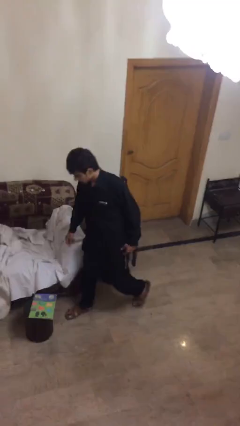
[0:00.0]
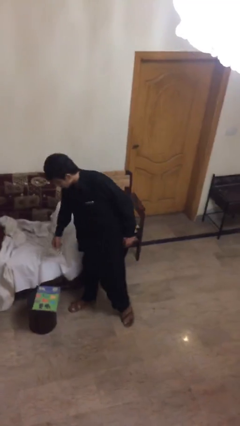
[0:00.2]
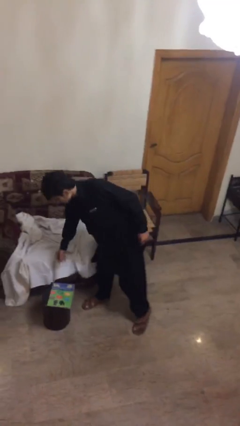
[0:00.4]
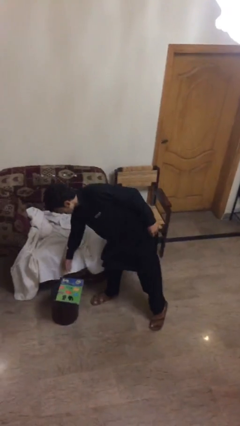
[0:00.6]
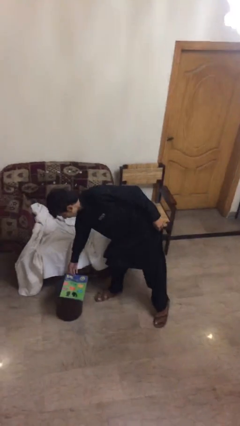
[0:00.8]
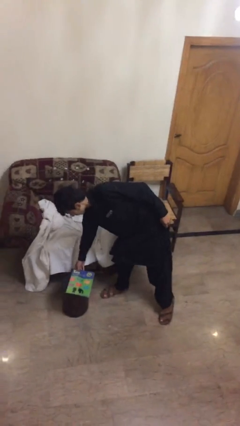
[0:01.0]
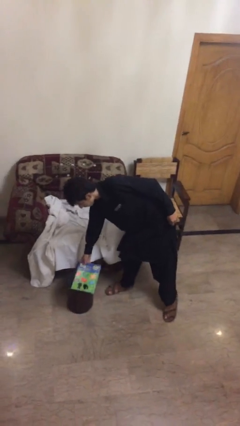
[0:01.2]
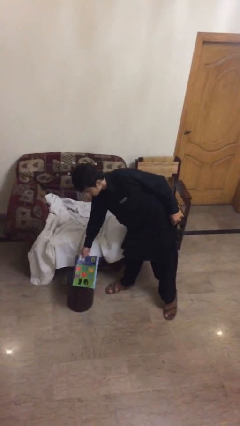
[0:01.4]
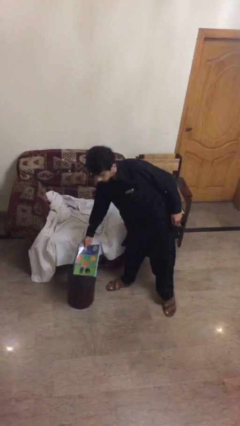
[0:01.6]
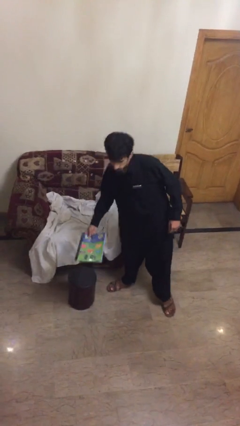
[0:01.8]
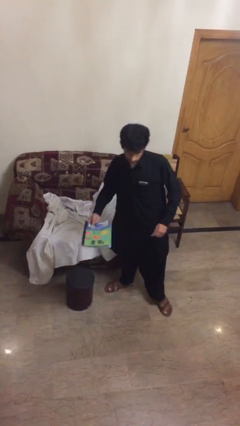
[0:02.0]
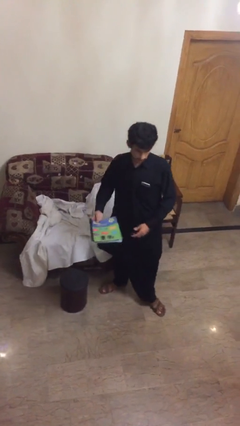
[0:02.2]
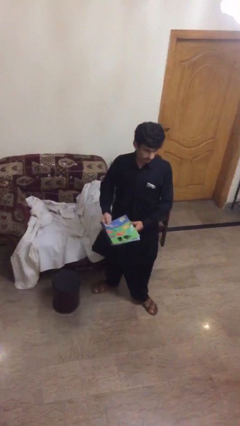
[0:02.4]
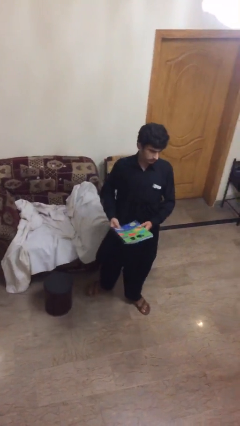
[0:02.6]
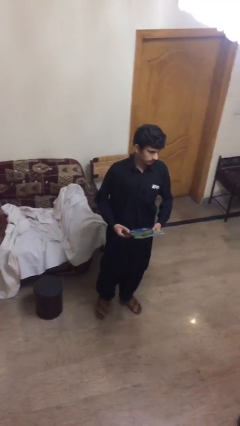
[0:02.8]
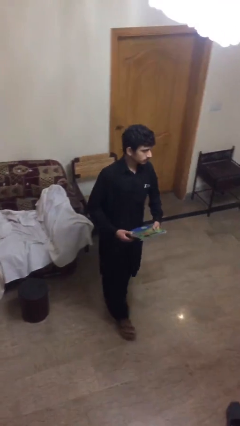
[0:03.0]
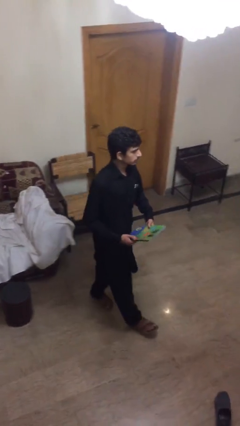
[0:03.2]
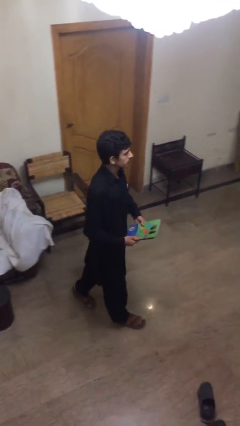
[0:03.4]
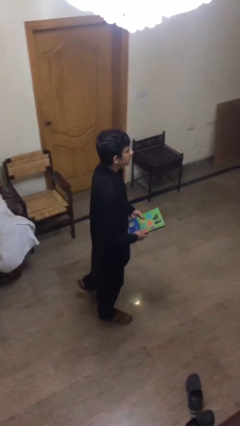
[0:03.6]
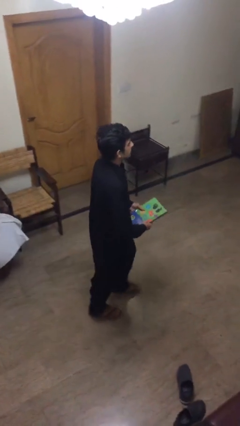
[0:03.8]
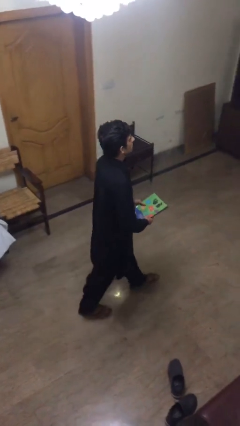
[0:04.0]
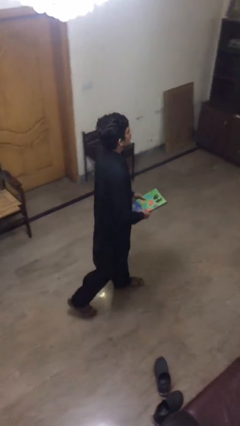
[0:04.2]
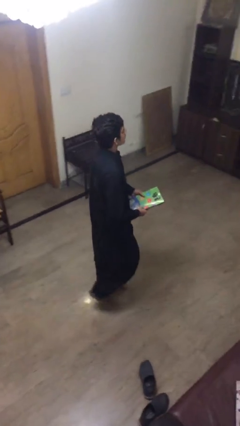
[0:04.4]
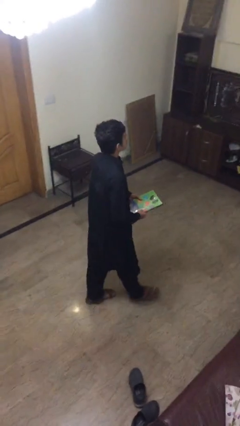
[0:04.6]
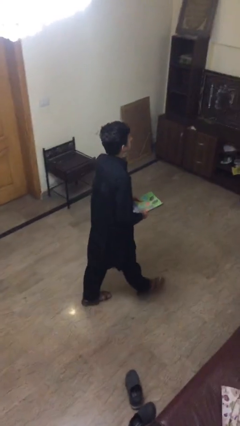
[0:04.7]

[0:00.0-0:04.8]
person picks up object from table

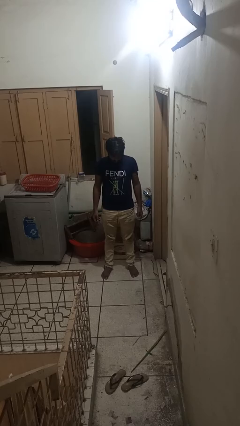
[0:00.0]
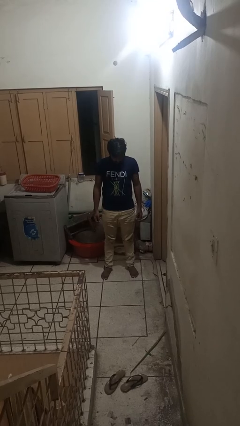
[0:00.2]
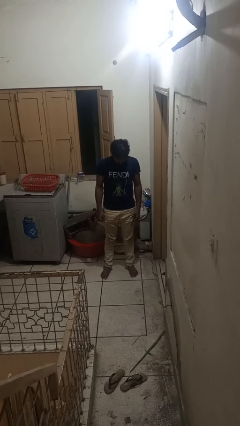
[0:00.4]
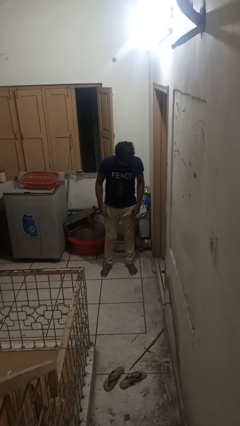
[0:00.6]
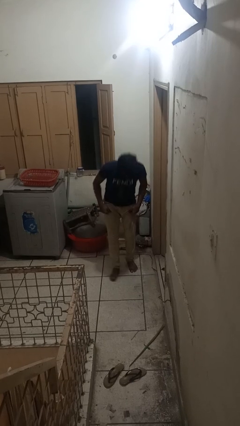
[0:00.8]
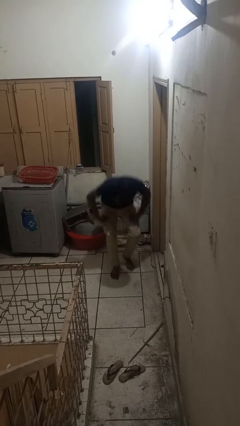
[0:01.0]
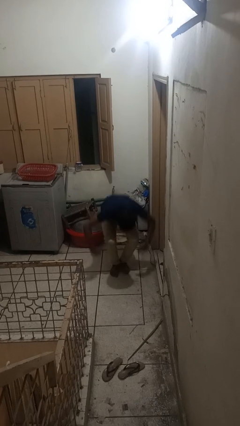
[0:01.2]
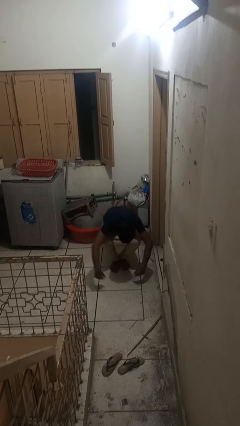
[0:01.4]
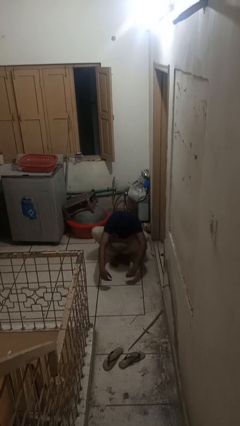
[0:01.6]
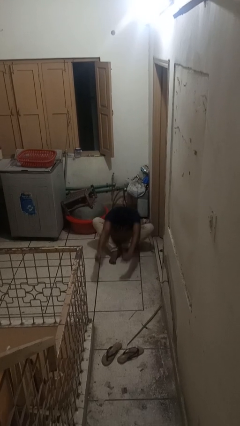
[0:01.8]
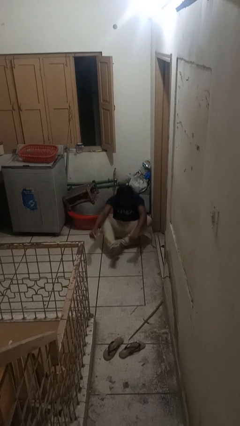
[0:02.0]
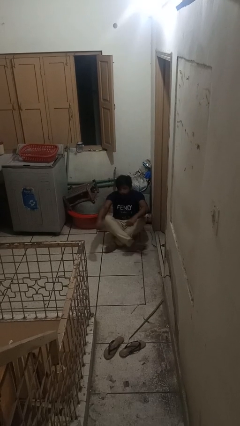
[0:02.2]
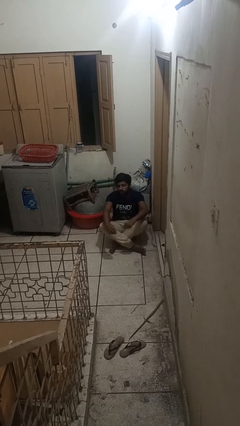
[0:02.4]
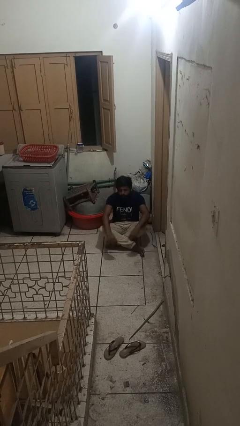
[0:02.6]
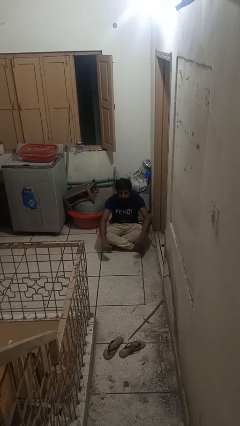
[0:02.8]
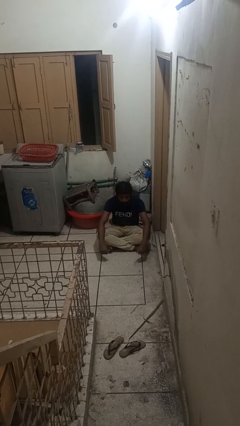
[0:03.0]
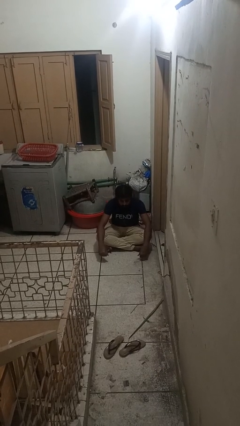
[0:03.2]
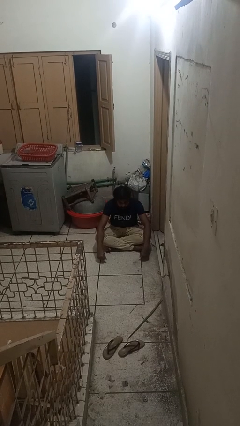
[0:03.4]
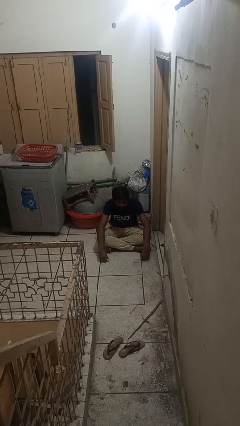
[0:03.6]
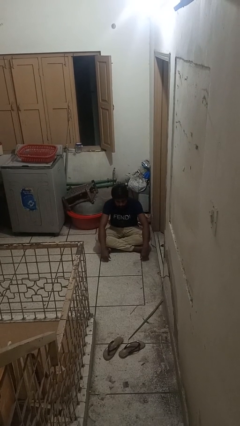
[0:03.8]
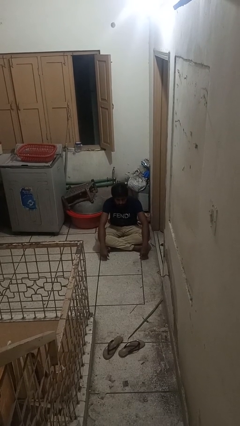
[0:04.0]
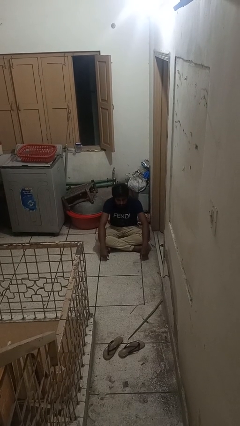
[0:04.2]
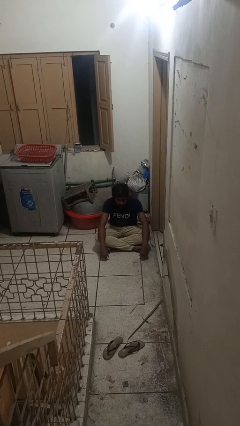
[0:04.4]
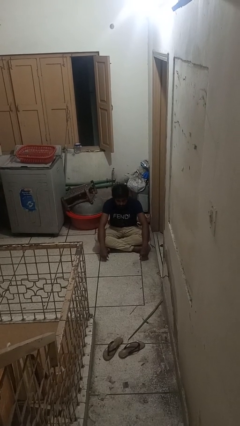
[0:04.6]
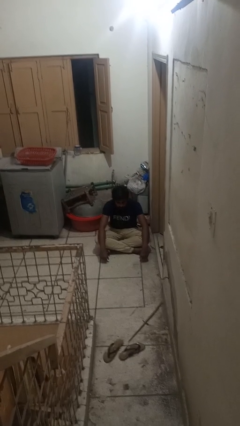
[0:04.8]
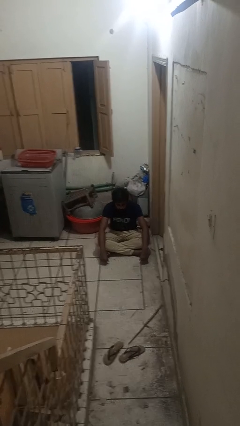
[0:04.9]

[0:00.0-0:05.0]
person sits crisscross

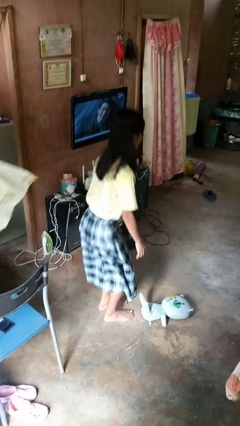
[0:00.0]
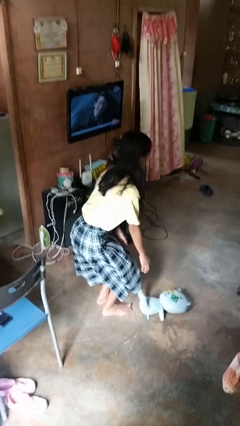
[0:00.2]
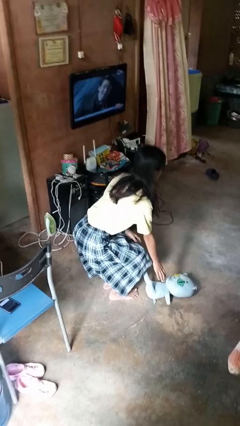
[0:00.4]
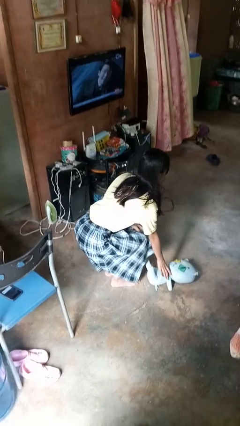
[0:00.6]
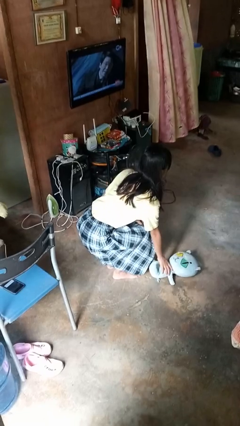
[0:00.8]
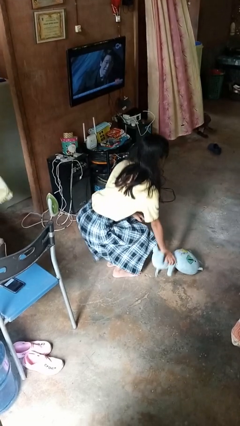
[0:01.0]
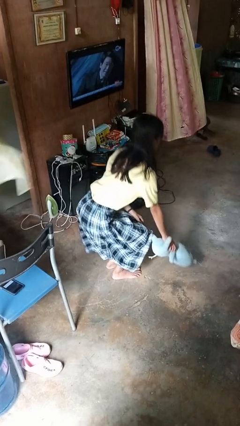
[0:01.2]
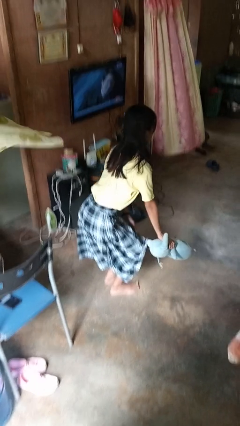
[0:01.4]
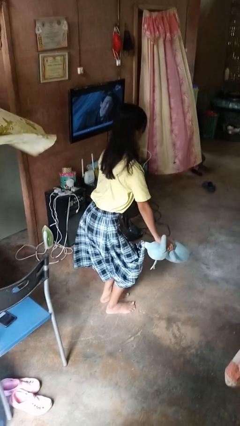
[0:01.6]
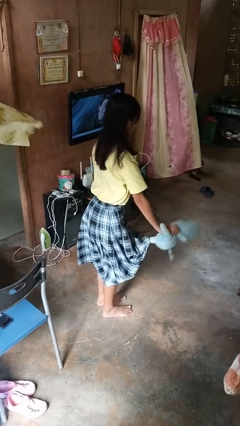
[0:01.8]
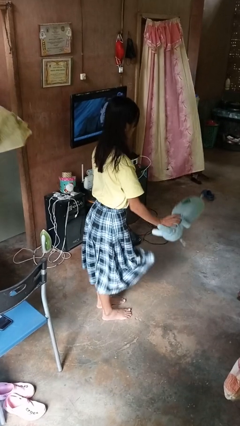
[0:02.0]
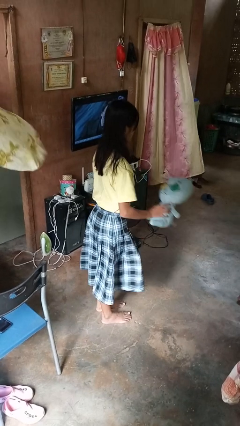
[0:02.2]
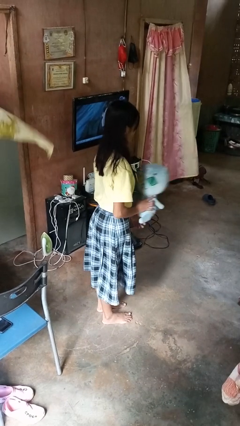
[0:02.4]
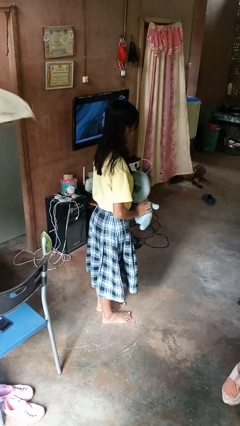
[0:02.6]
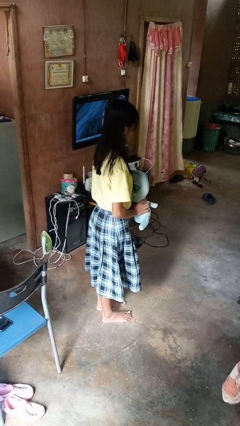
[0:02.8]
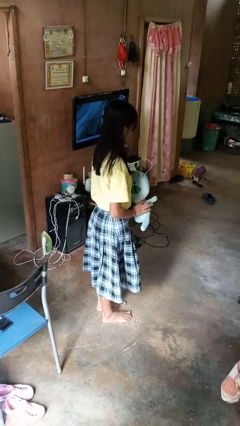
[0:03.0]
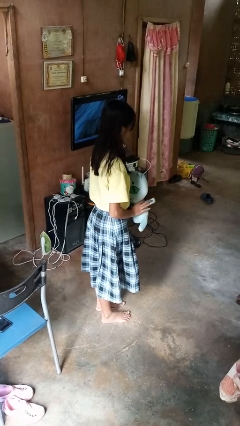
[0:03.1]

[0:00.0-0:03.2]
person picks up object from floor

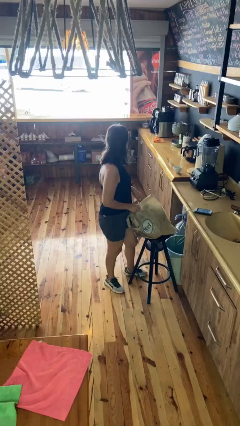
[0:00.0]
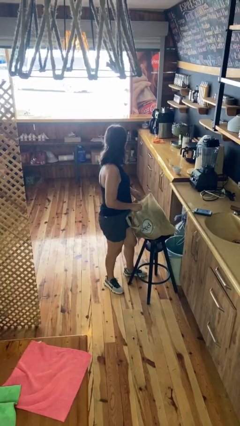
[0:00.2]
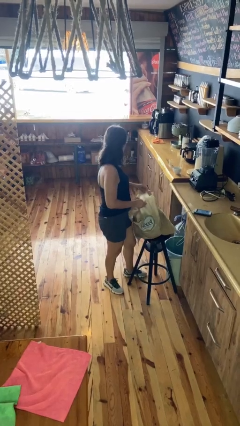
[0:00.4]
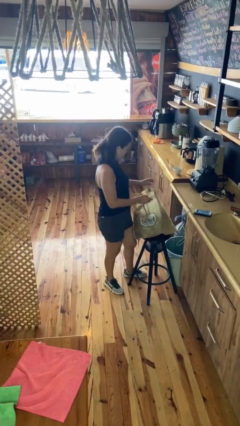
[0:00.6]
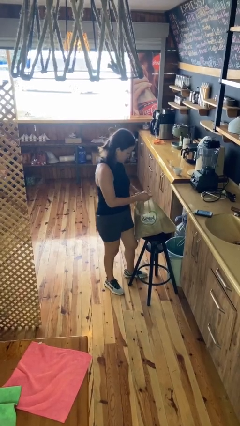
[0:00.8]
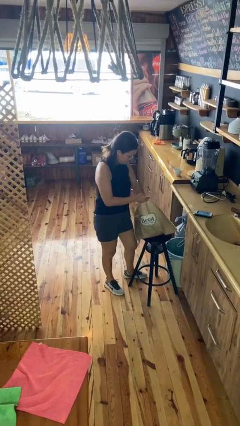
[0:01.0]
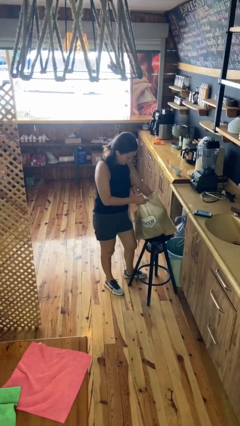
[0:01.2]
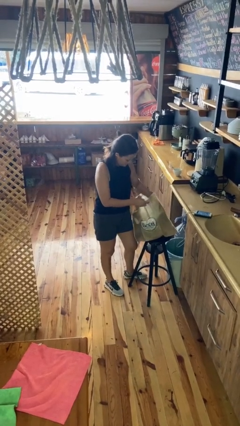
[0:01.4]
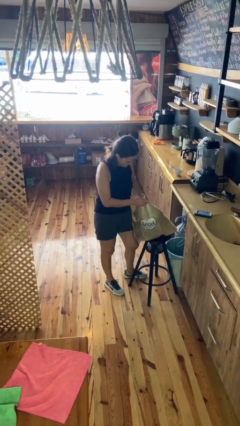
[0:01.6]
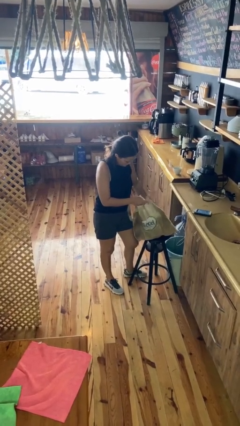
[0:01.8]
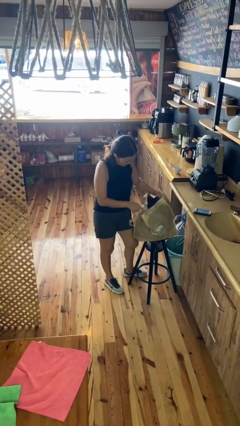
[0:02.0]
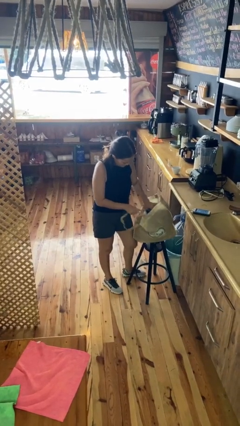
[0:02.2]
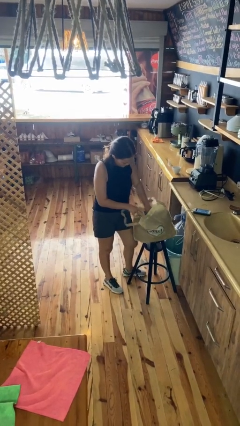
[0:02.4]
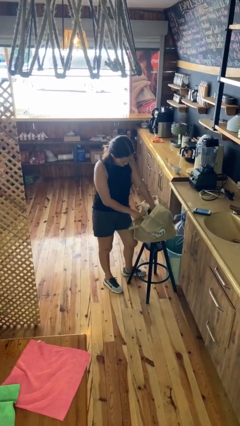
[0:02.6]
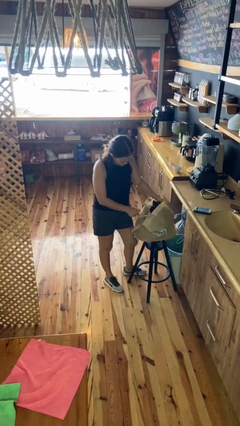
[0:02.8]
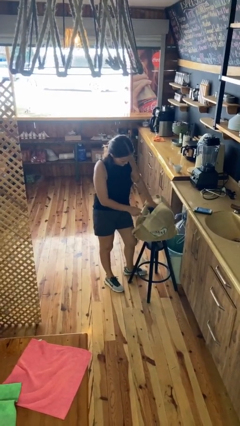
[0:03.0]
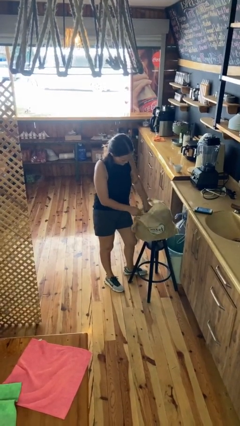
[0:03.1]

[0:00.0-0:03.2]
person searches in bag

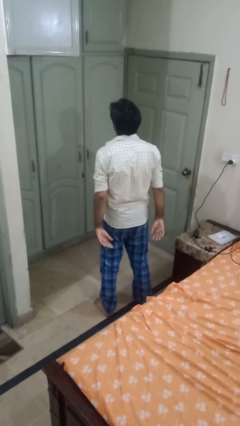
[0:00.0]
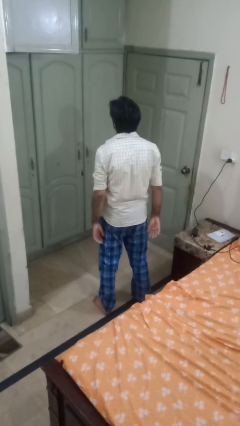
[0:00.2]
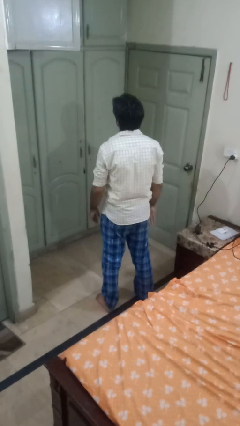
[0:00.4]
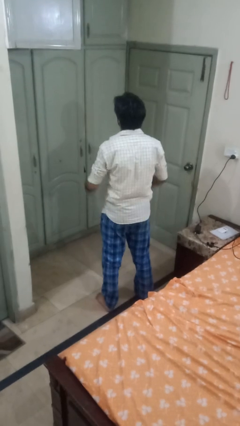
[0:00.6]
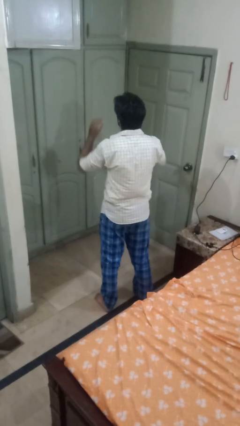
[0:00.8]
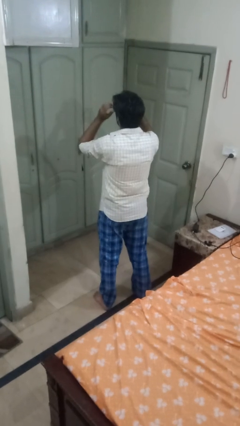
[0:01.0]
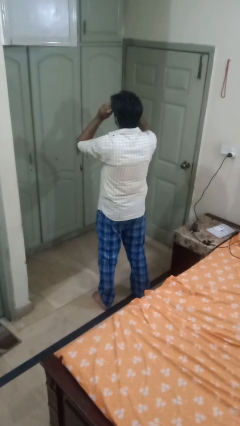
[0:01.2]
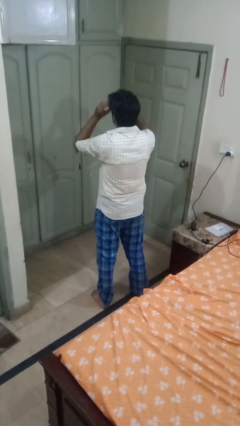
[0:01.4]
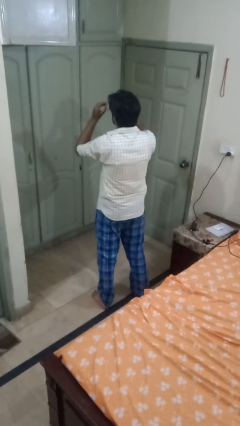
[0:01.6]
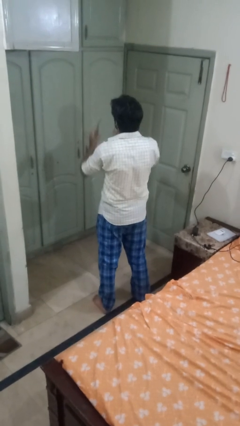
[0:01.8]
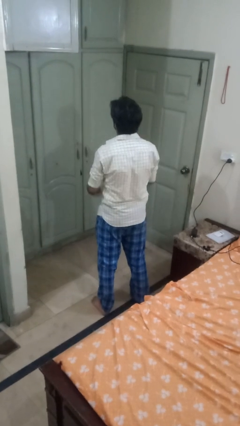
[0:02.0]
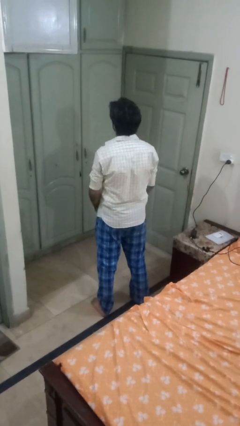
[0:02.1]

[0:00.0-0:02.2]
person takes off glasses
